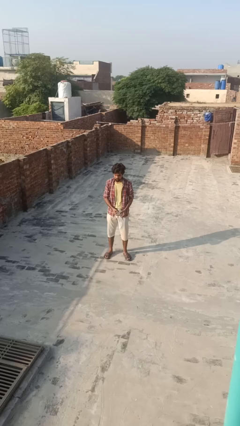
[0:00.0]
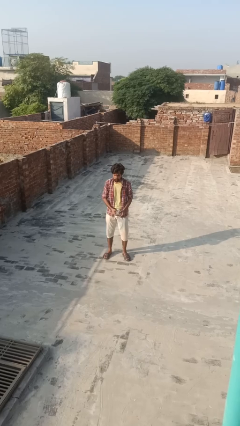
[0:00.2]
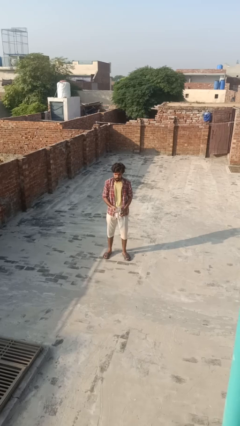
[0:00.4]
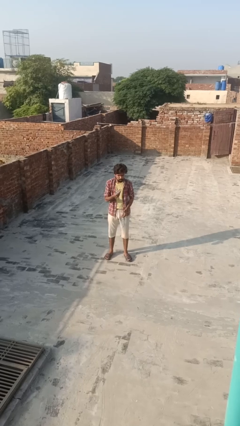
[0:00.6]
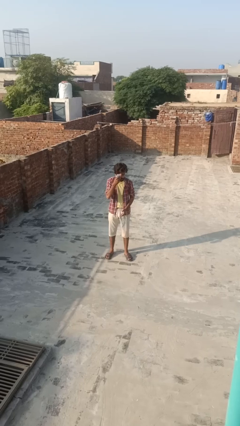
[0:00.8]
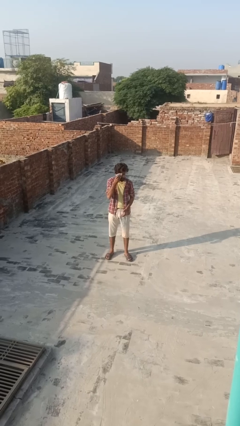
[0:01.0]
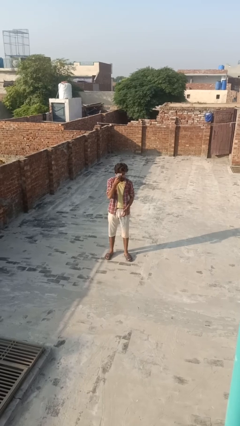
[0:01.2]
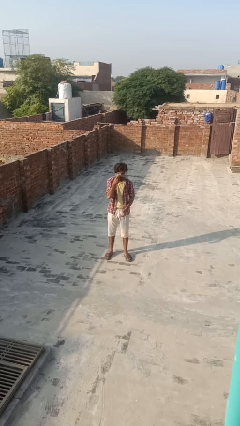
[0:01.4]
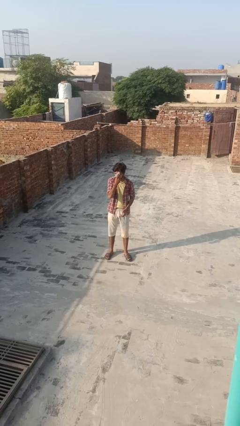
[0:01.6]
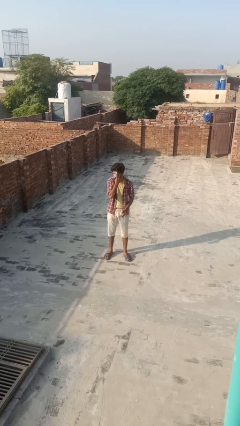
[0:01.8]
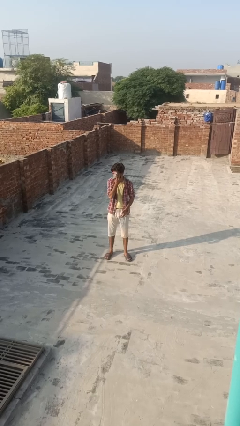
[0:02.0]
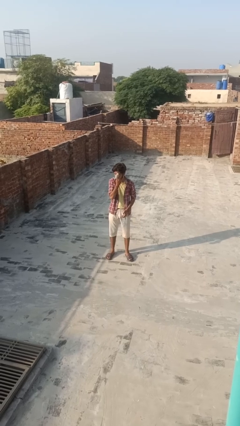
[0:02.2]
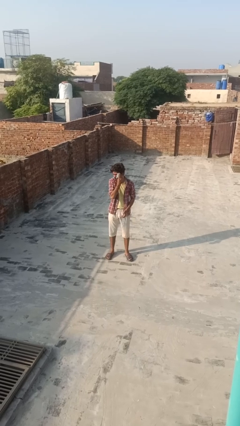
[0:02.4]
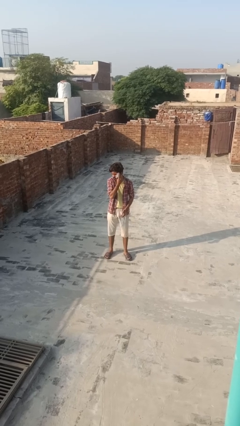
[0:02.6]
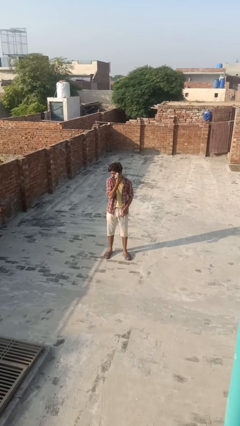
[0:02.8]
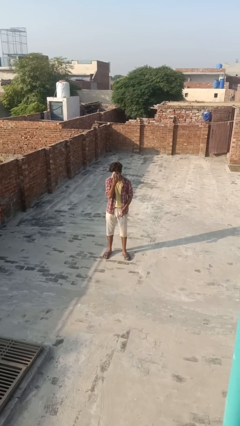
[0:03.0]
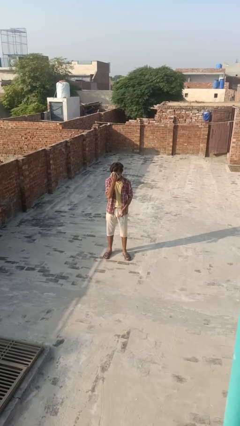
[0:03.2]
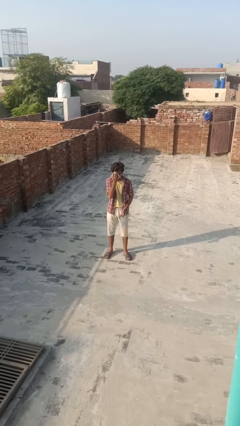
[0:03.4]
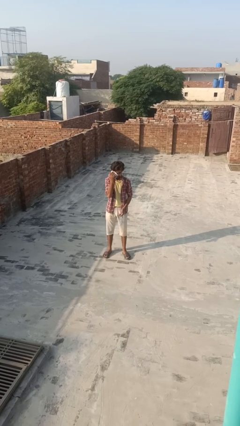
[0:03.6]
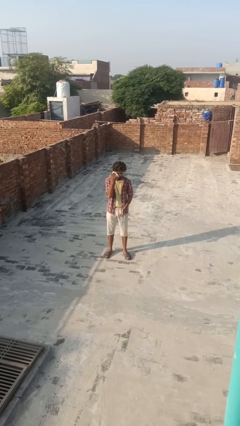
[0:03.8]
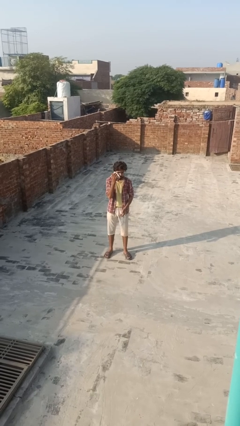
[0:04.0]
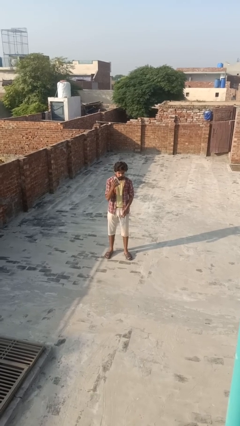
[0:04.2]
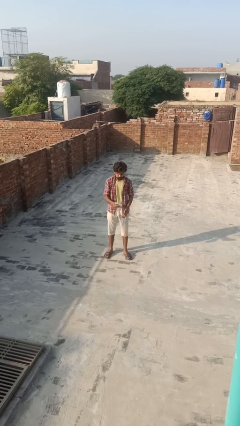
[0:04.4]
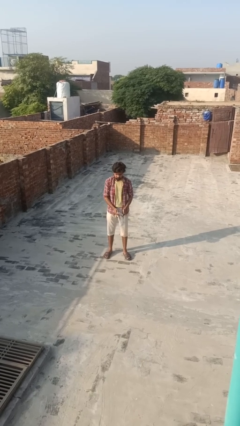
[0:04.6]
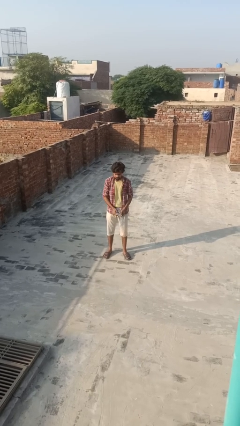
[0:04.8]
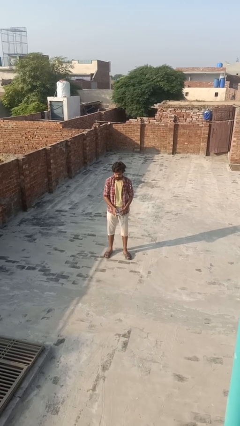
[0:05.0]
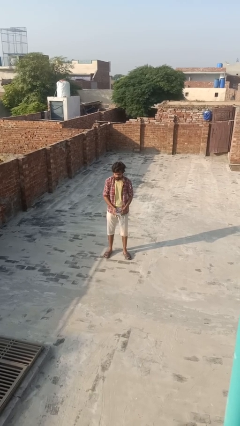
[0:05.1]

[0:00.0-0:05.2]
person wipes mouth with napkin

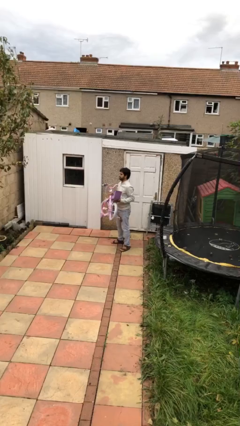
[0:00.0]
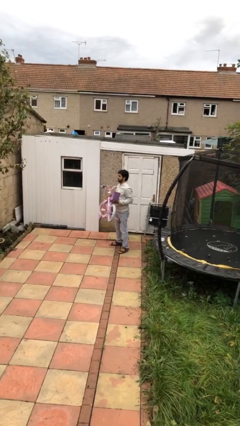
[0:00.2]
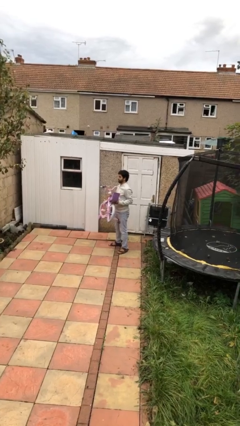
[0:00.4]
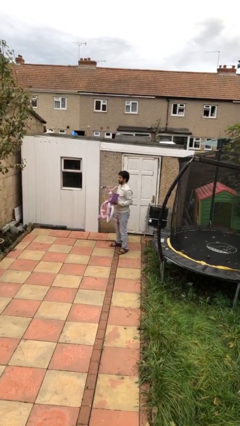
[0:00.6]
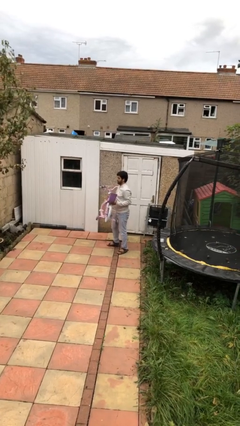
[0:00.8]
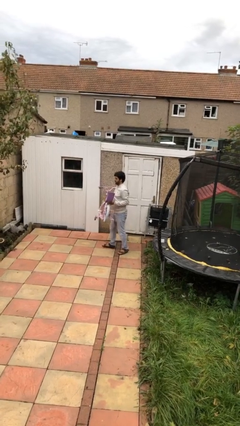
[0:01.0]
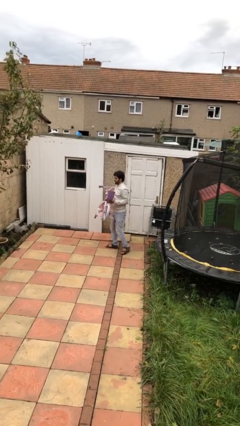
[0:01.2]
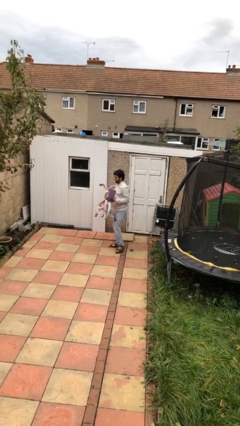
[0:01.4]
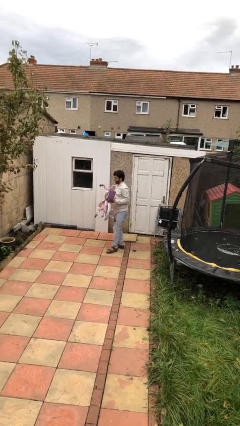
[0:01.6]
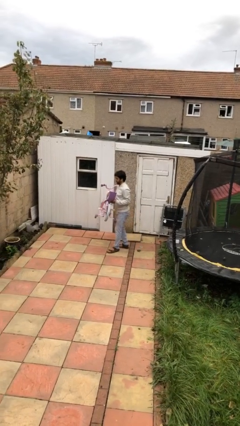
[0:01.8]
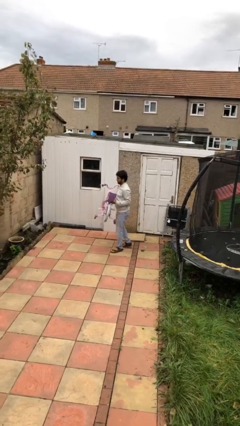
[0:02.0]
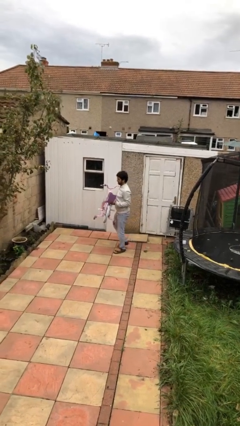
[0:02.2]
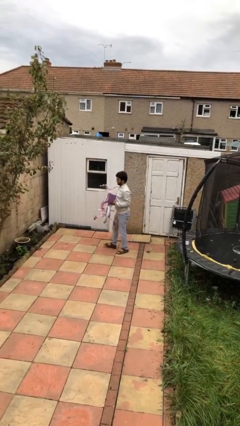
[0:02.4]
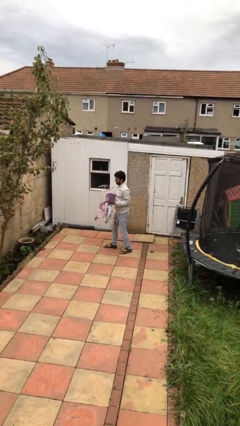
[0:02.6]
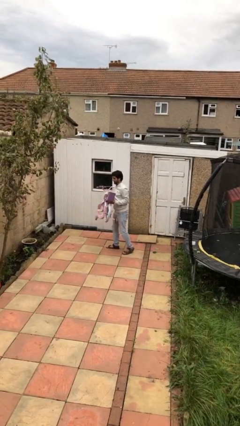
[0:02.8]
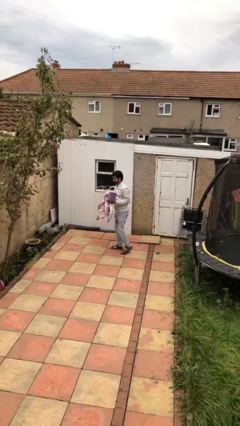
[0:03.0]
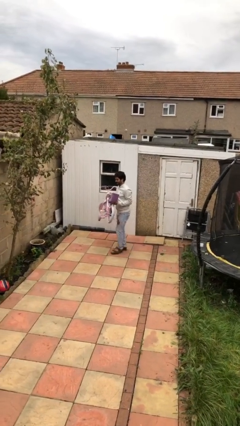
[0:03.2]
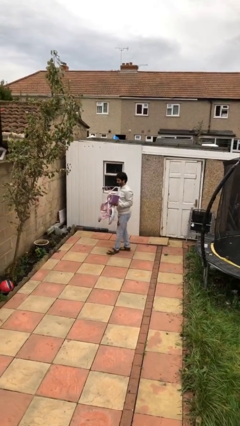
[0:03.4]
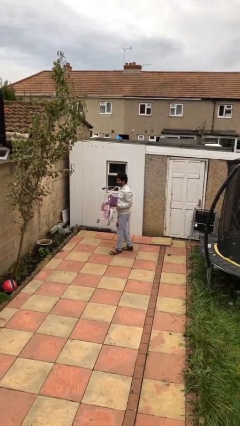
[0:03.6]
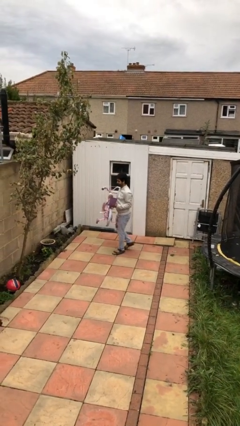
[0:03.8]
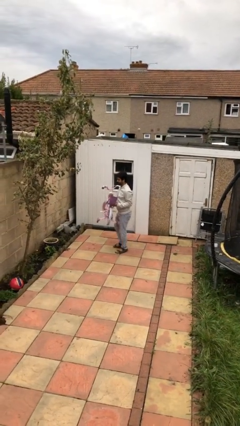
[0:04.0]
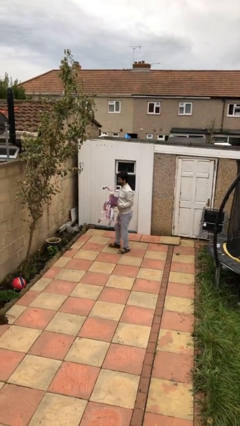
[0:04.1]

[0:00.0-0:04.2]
person carries heavy object

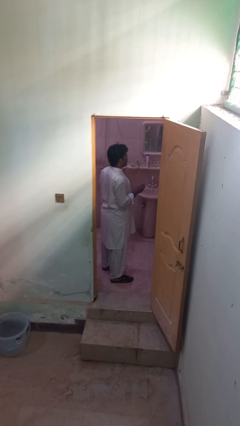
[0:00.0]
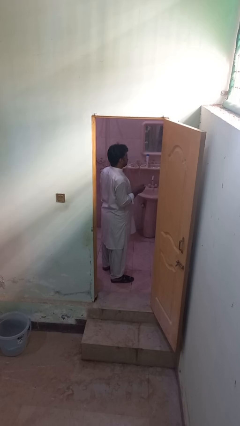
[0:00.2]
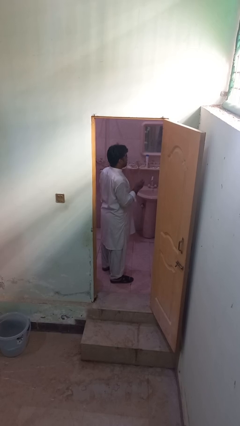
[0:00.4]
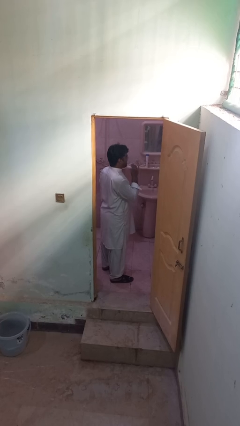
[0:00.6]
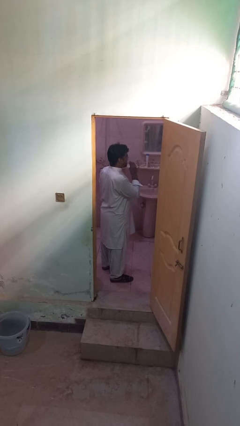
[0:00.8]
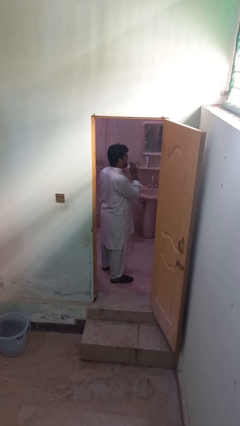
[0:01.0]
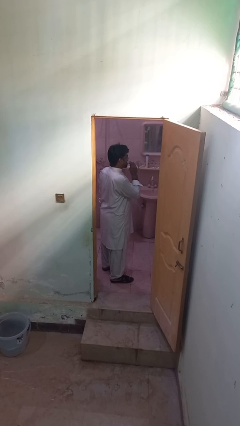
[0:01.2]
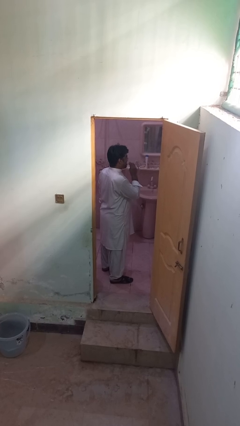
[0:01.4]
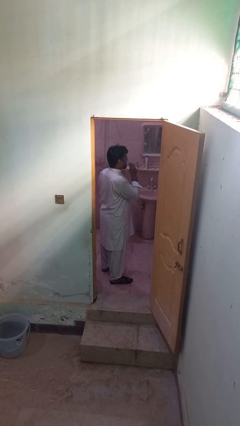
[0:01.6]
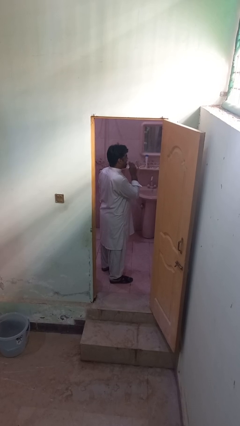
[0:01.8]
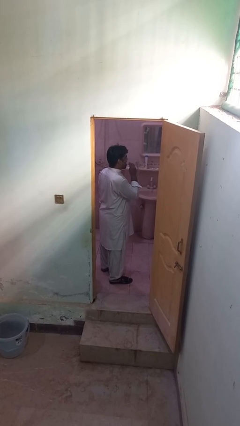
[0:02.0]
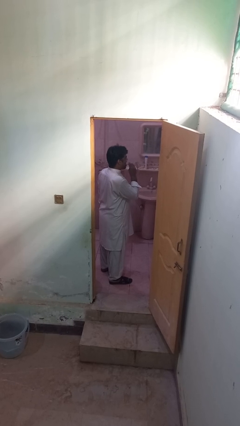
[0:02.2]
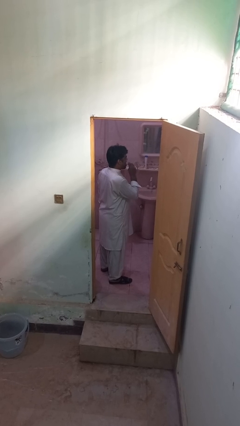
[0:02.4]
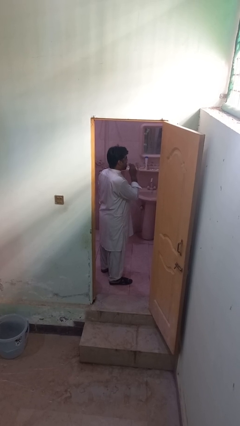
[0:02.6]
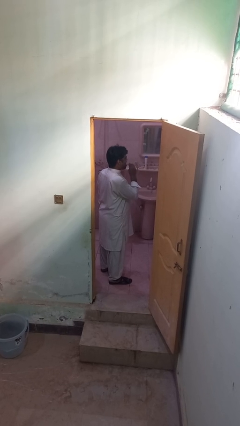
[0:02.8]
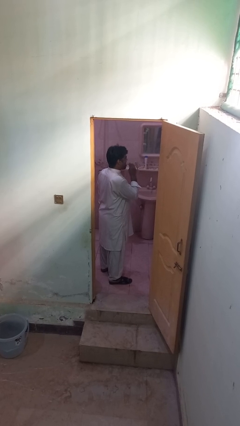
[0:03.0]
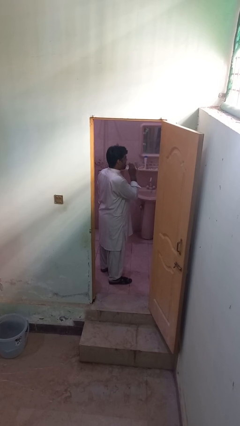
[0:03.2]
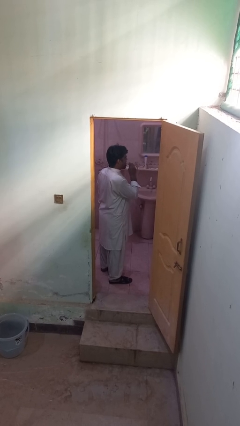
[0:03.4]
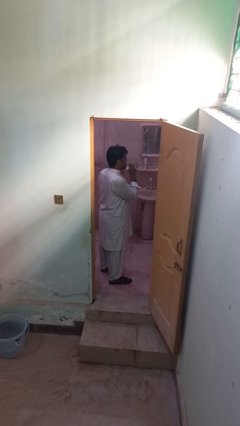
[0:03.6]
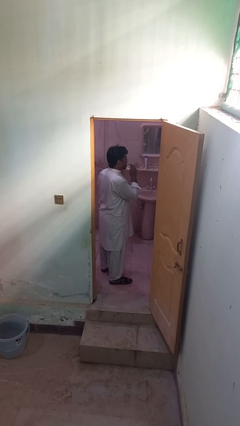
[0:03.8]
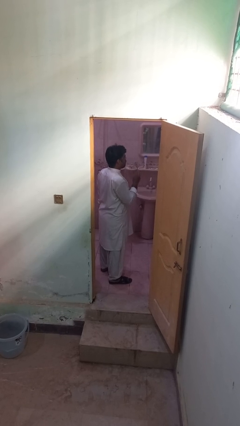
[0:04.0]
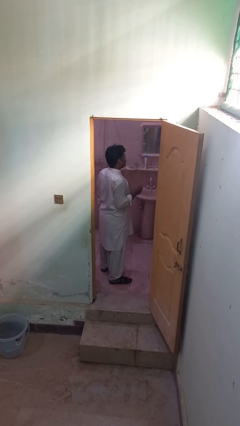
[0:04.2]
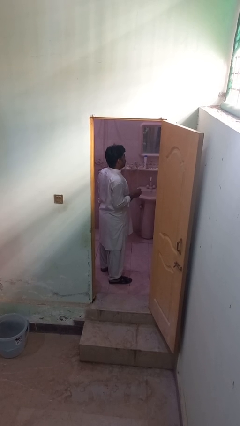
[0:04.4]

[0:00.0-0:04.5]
person flosses

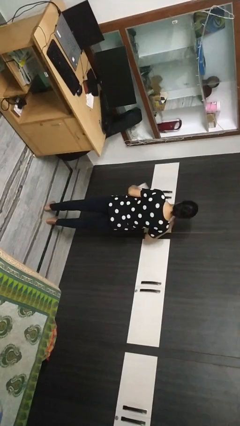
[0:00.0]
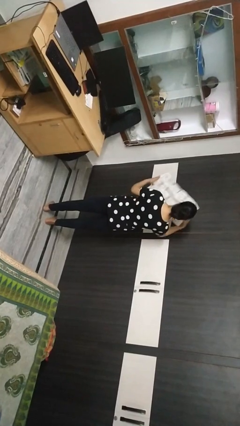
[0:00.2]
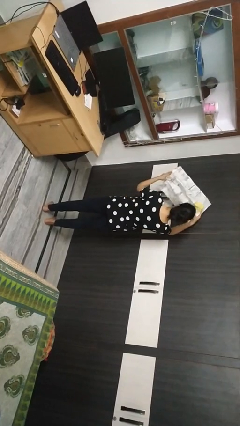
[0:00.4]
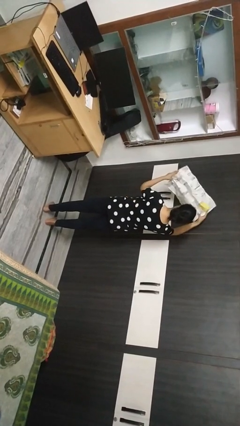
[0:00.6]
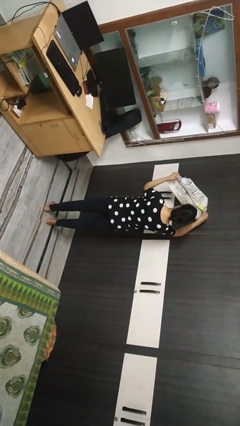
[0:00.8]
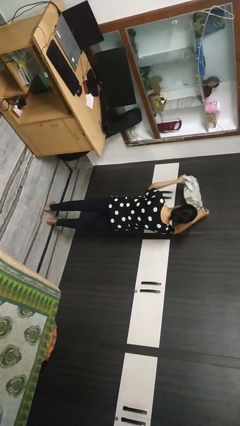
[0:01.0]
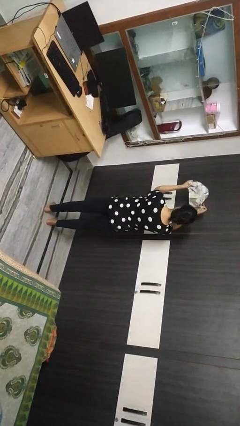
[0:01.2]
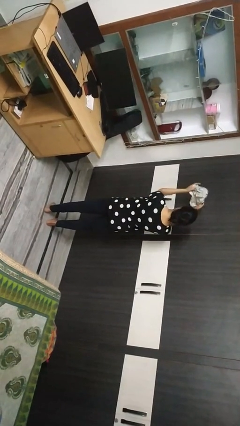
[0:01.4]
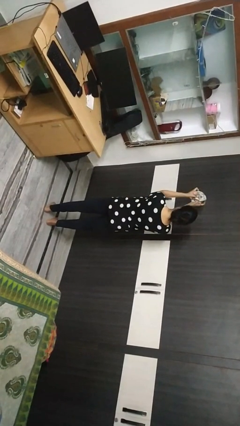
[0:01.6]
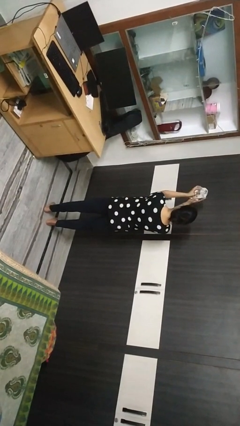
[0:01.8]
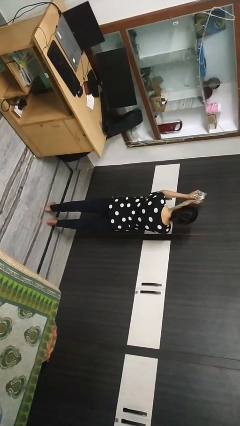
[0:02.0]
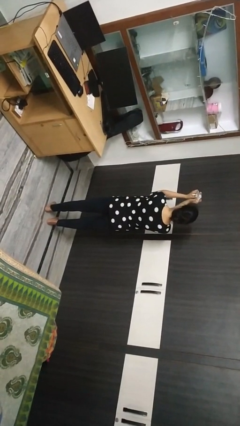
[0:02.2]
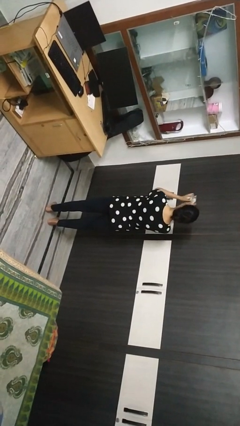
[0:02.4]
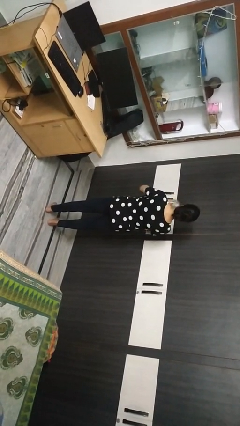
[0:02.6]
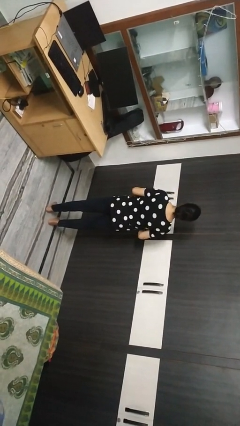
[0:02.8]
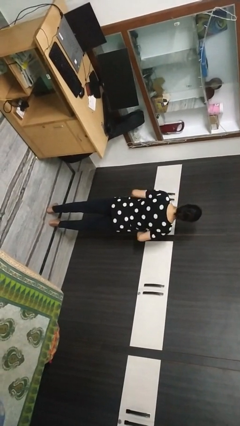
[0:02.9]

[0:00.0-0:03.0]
person crumples paper

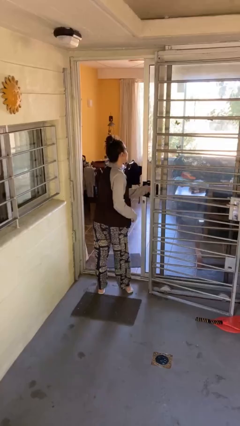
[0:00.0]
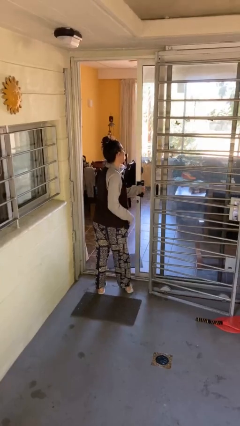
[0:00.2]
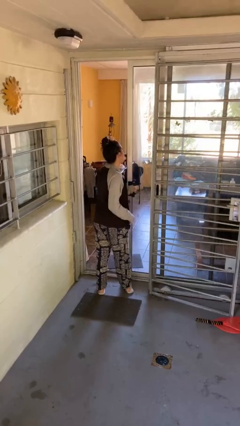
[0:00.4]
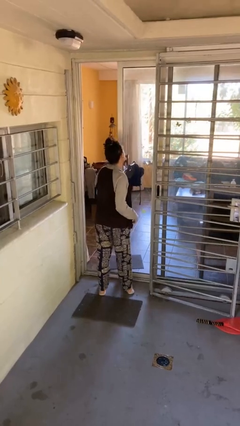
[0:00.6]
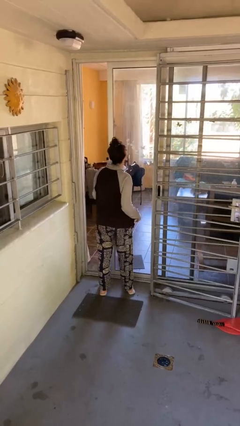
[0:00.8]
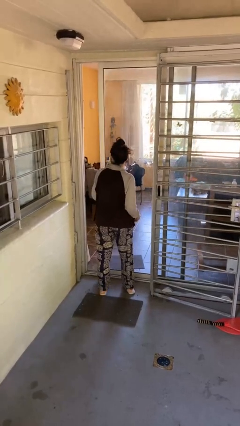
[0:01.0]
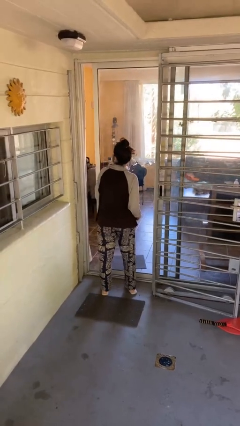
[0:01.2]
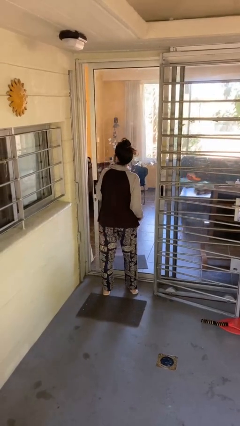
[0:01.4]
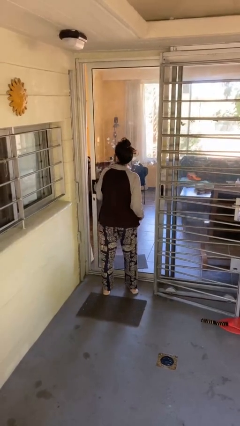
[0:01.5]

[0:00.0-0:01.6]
person closes facility door
